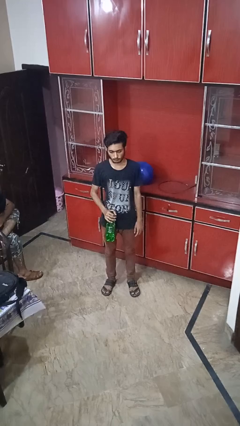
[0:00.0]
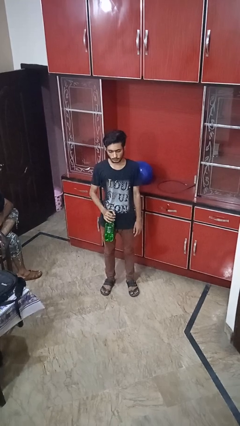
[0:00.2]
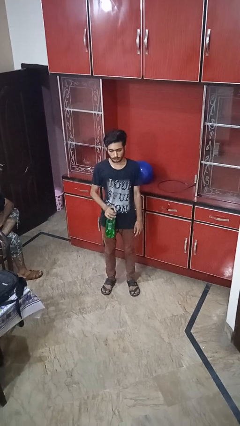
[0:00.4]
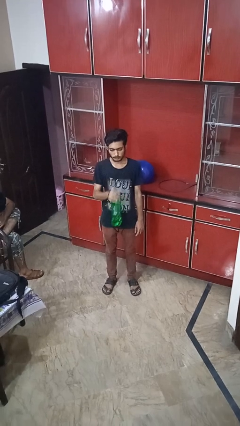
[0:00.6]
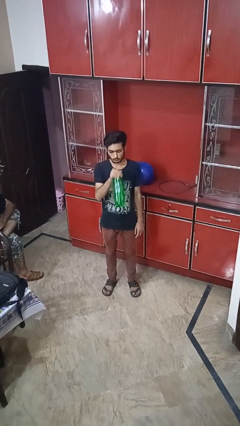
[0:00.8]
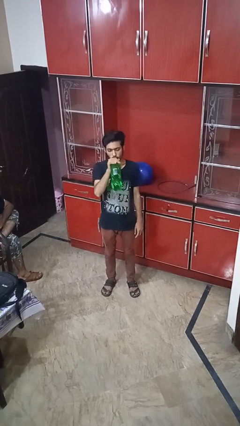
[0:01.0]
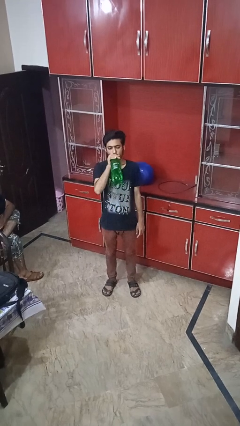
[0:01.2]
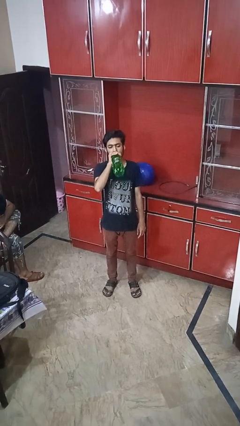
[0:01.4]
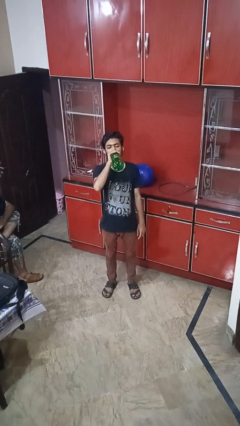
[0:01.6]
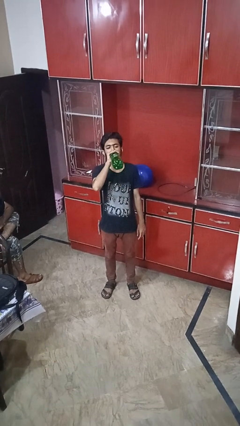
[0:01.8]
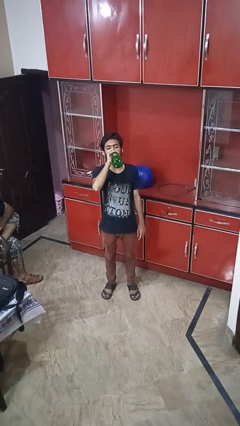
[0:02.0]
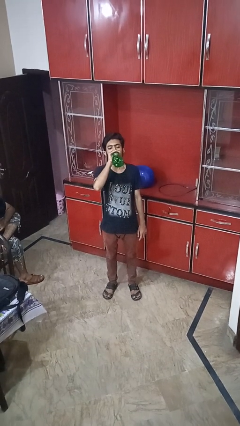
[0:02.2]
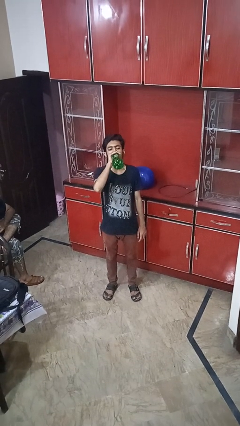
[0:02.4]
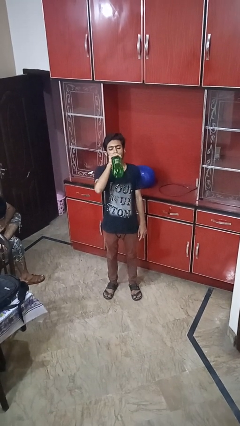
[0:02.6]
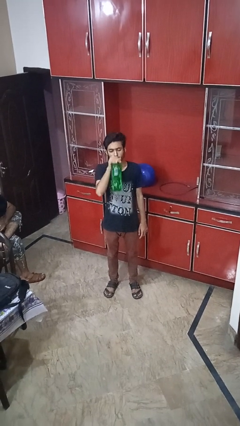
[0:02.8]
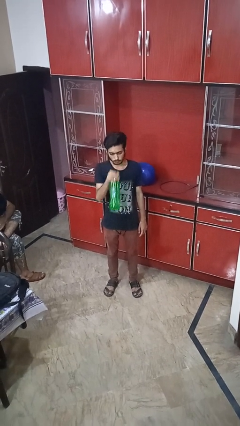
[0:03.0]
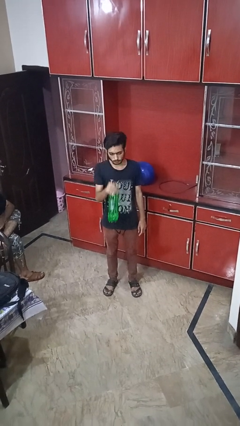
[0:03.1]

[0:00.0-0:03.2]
person drinks from bottle

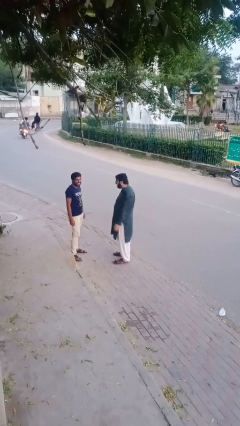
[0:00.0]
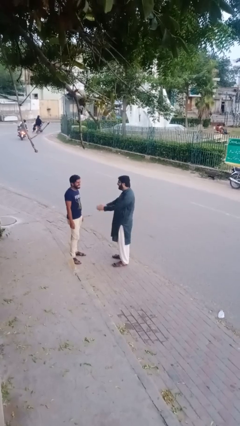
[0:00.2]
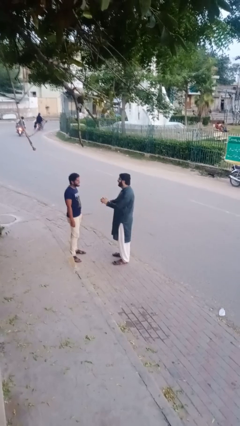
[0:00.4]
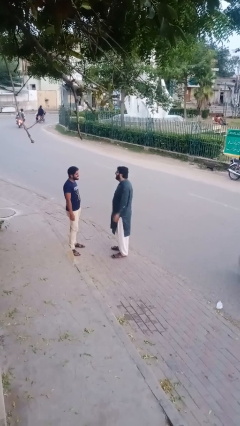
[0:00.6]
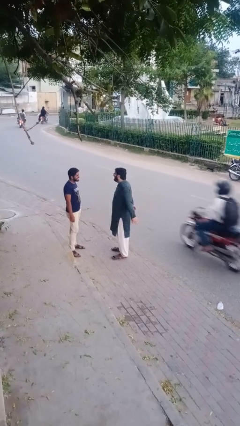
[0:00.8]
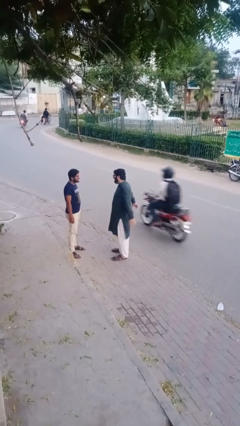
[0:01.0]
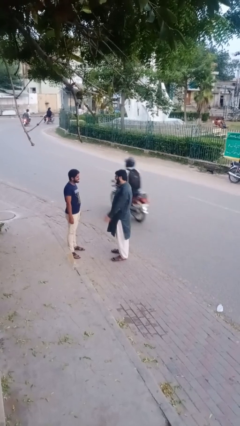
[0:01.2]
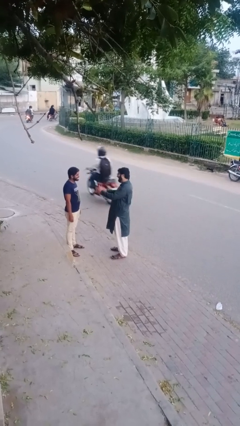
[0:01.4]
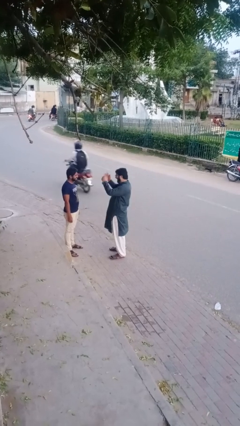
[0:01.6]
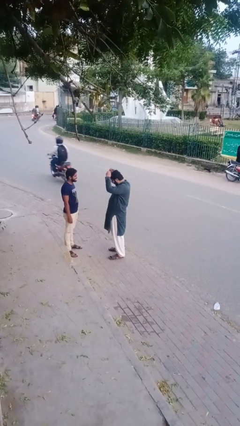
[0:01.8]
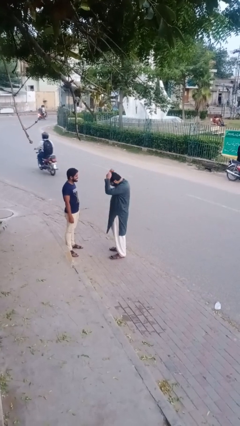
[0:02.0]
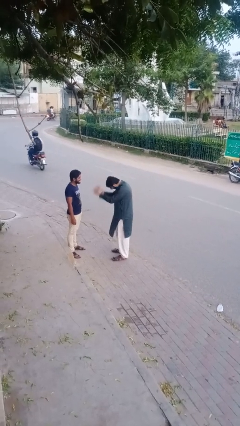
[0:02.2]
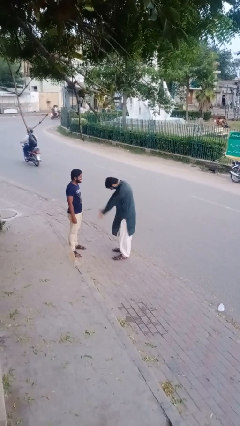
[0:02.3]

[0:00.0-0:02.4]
person laughs with person

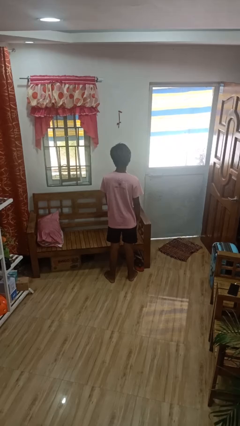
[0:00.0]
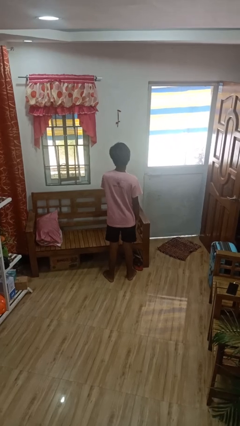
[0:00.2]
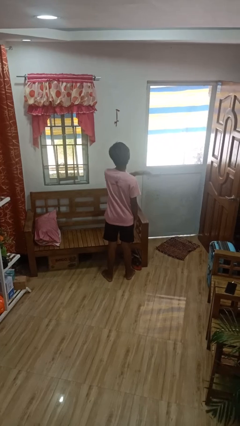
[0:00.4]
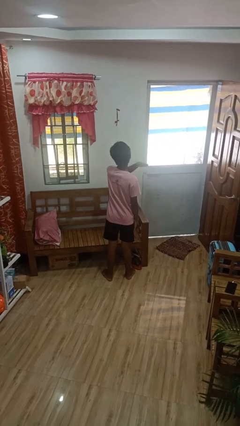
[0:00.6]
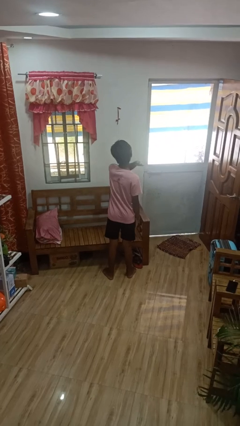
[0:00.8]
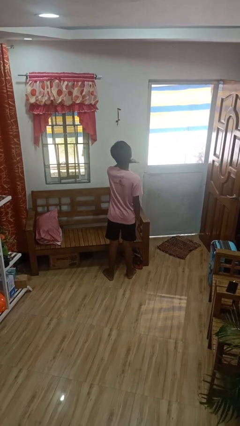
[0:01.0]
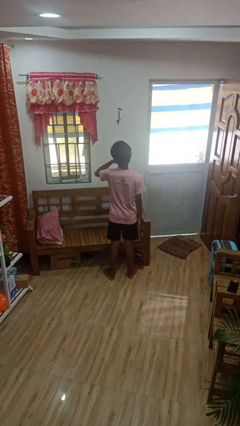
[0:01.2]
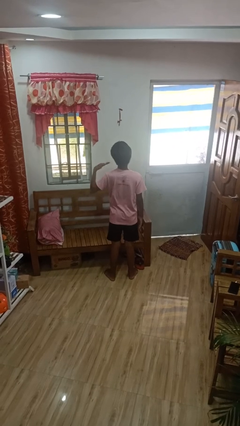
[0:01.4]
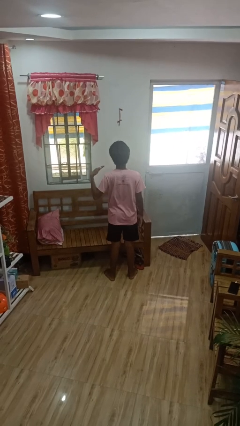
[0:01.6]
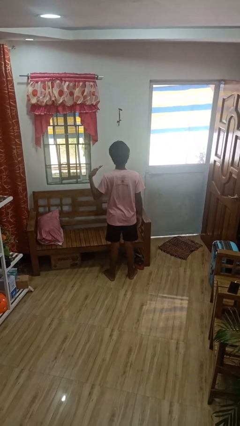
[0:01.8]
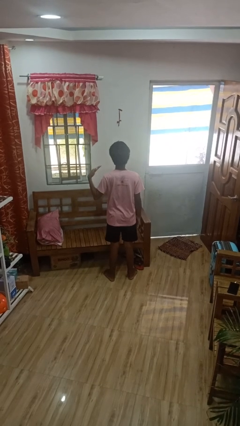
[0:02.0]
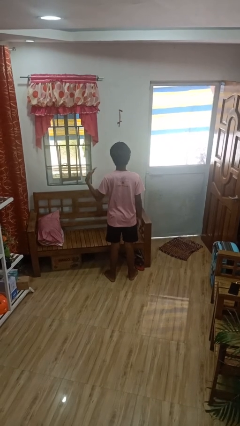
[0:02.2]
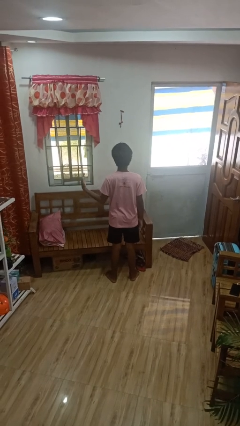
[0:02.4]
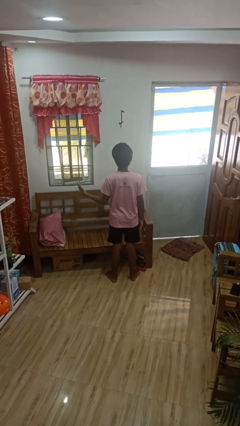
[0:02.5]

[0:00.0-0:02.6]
person gestures cut

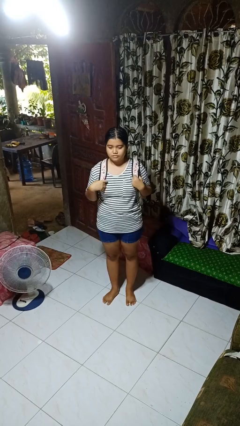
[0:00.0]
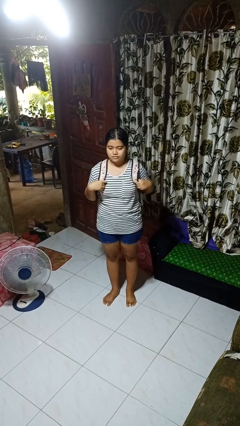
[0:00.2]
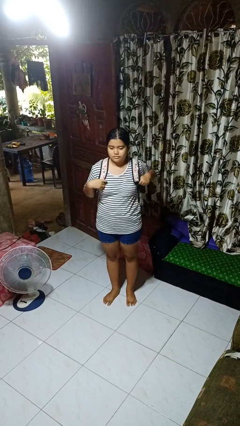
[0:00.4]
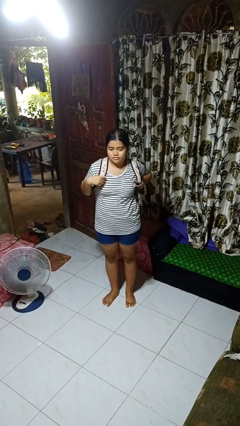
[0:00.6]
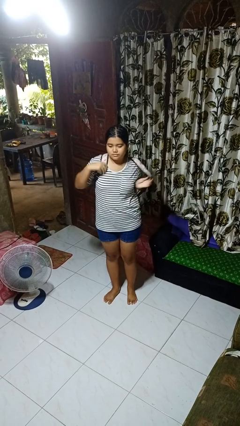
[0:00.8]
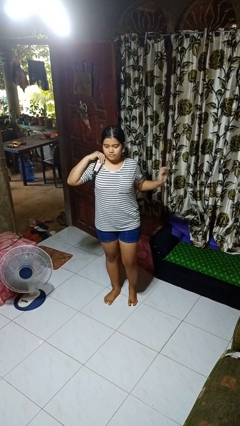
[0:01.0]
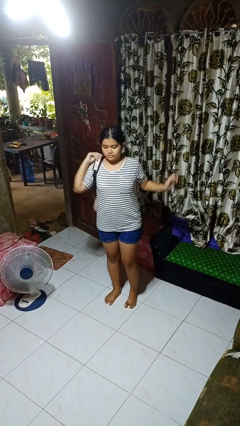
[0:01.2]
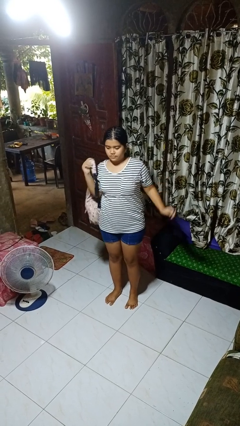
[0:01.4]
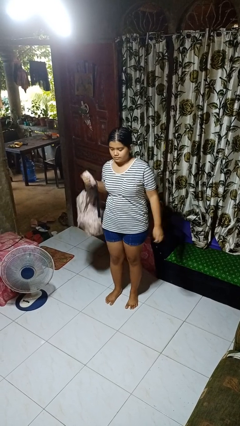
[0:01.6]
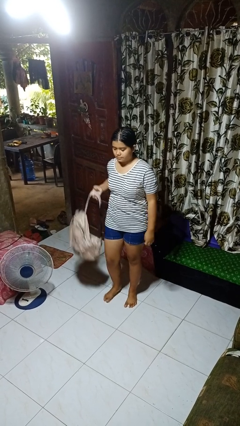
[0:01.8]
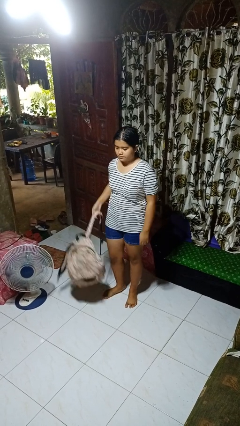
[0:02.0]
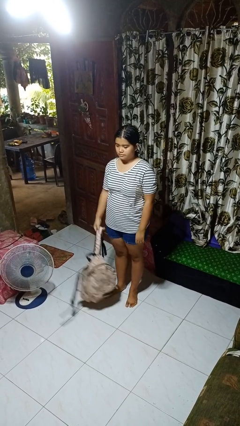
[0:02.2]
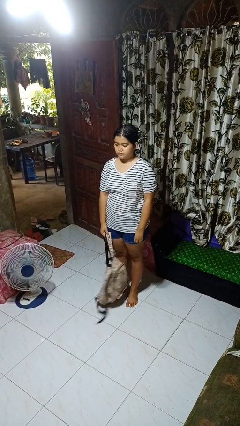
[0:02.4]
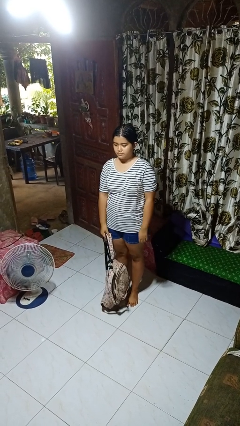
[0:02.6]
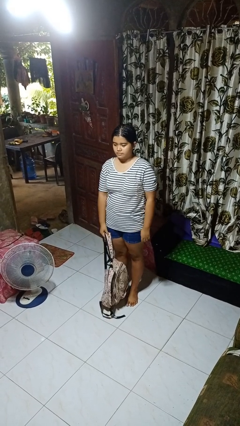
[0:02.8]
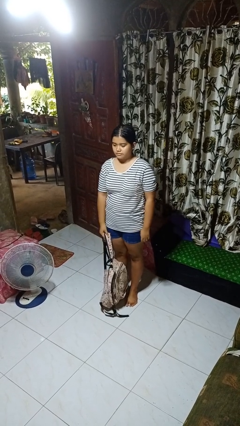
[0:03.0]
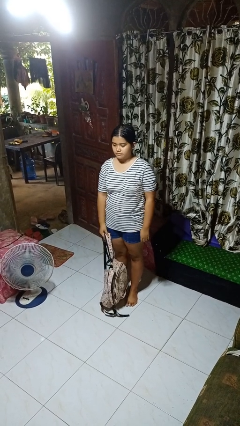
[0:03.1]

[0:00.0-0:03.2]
person takes off backpack

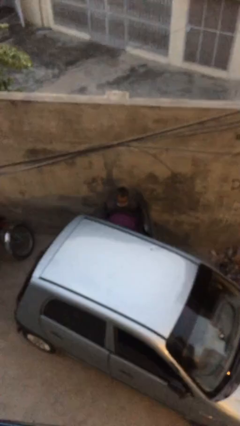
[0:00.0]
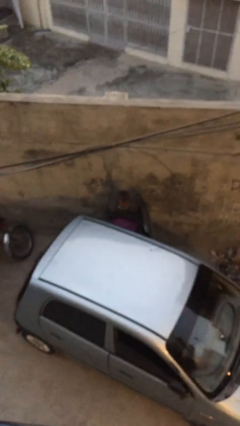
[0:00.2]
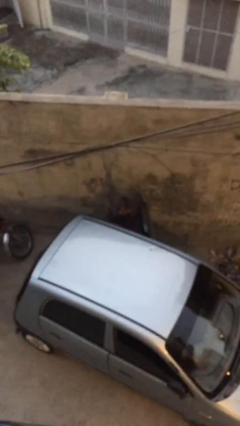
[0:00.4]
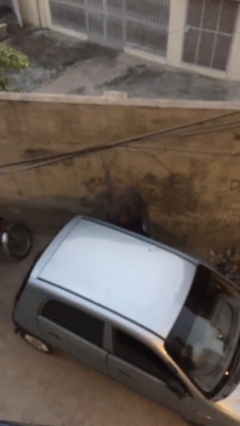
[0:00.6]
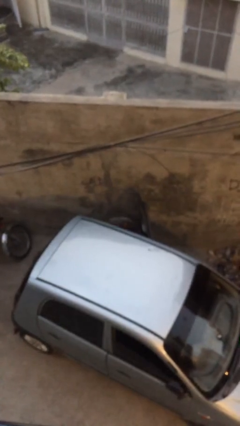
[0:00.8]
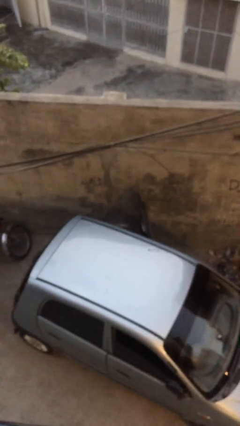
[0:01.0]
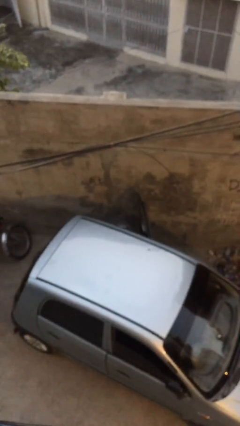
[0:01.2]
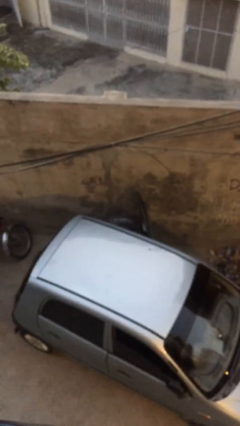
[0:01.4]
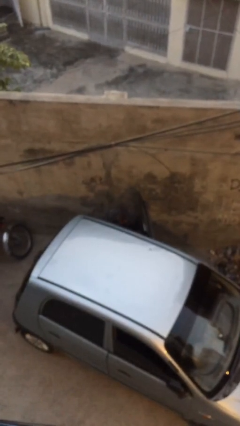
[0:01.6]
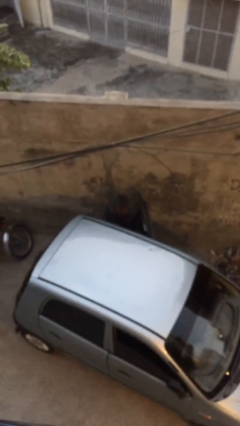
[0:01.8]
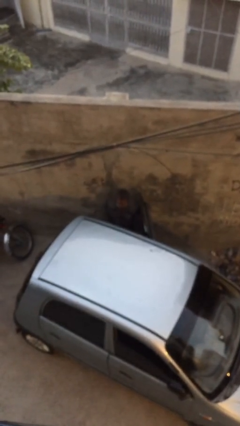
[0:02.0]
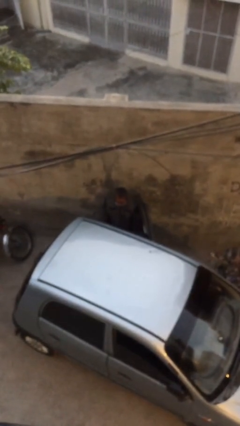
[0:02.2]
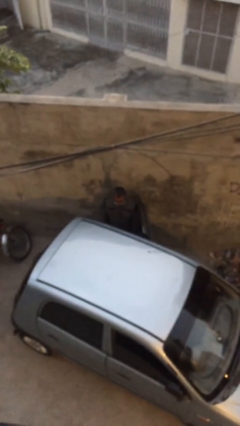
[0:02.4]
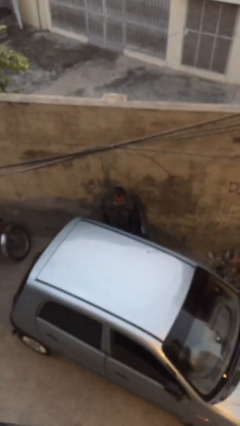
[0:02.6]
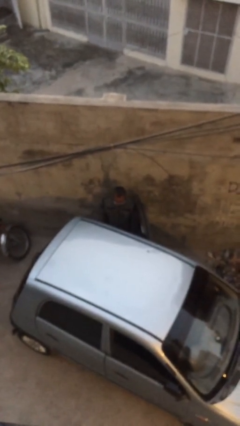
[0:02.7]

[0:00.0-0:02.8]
person loads car

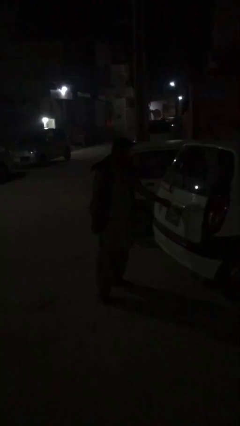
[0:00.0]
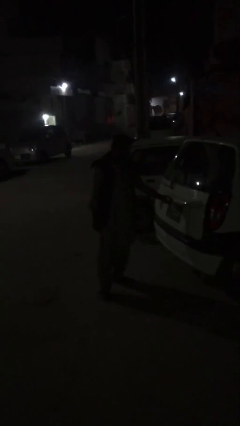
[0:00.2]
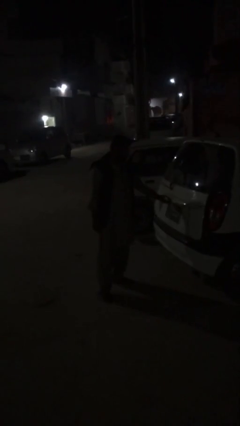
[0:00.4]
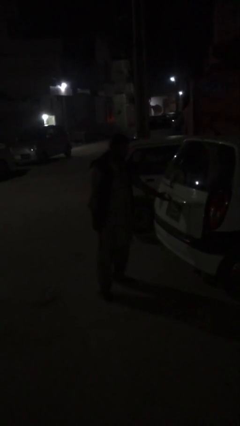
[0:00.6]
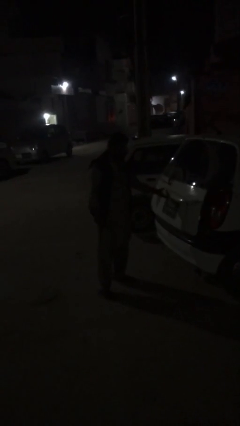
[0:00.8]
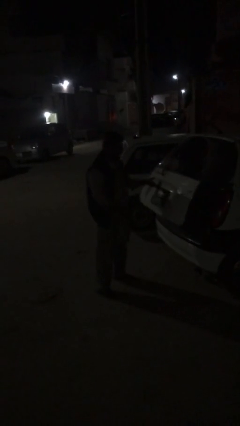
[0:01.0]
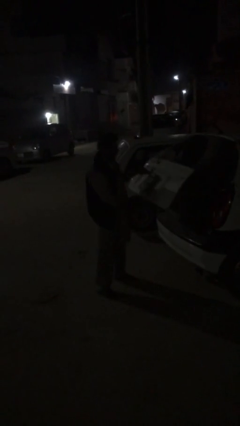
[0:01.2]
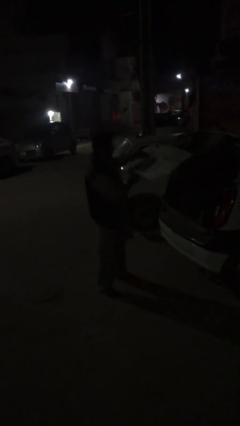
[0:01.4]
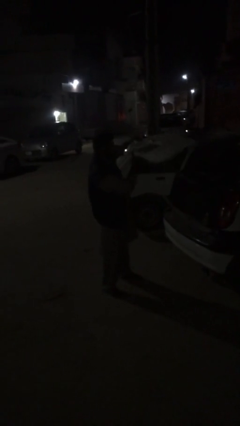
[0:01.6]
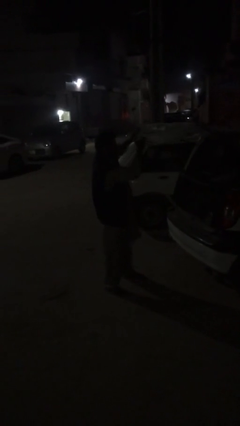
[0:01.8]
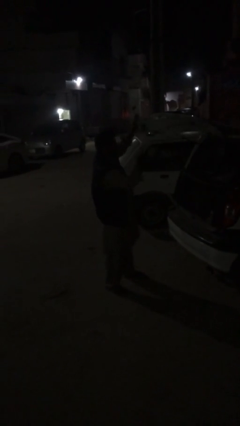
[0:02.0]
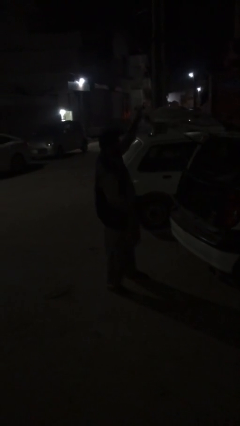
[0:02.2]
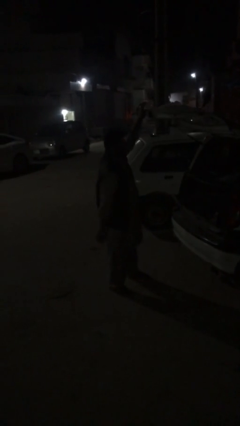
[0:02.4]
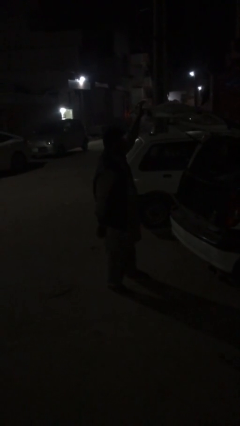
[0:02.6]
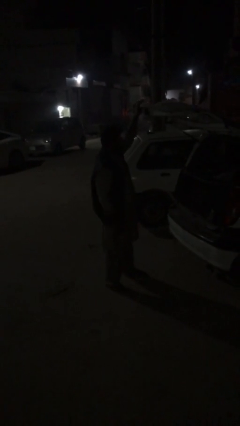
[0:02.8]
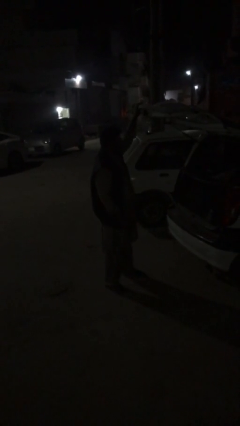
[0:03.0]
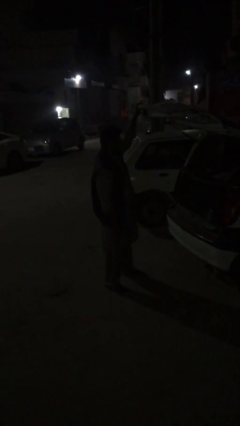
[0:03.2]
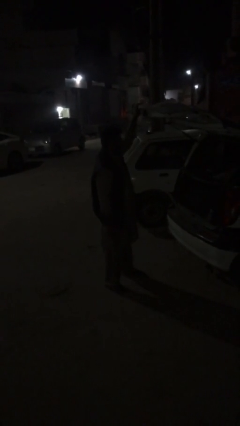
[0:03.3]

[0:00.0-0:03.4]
person opens car trunk
